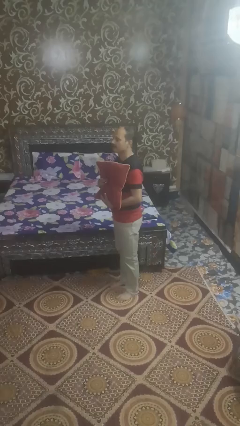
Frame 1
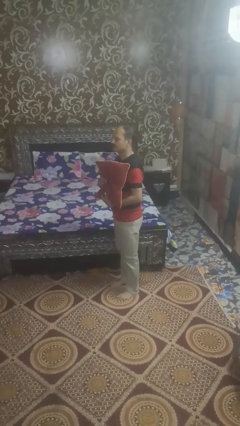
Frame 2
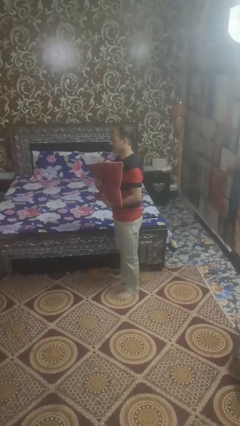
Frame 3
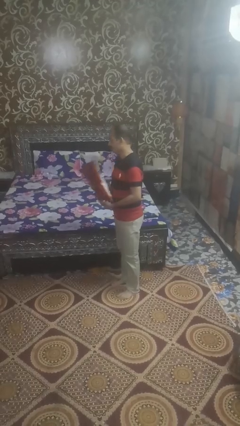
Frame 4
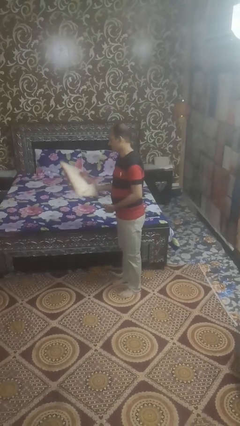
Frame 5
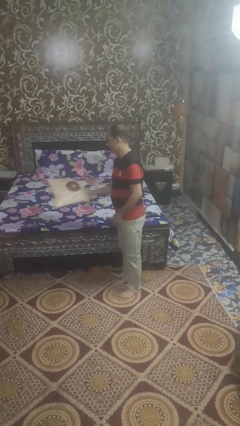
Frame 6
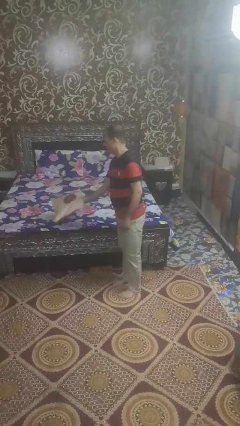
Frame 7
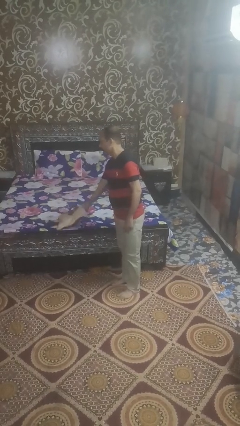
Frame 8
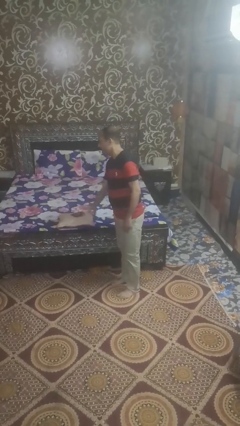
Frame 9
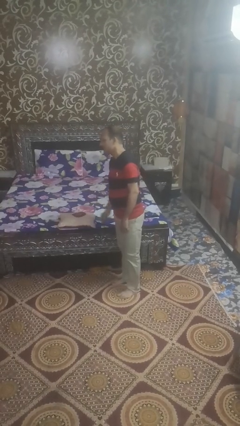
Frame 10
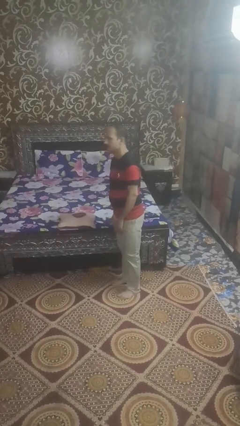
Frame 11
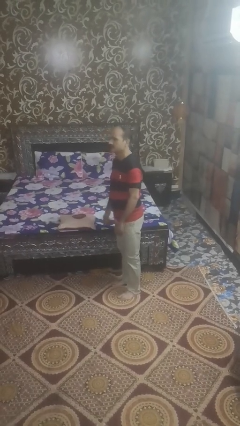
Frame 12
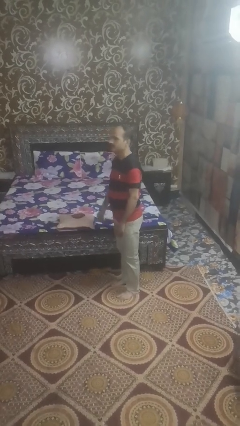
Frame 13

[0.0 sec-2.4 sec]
person puts down object on bed

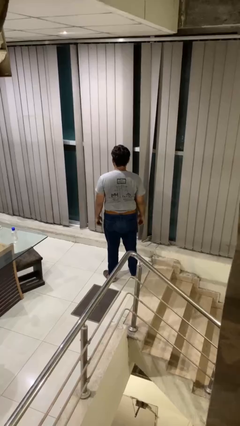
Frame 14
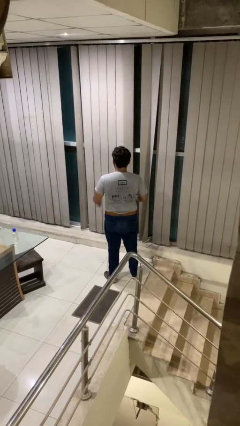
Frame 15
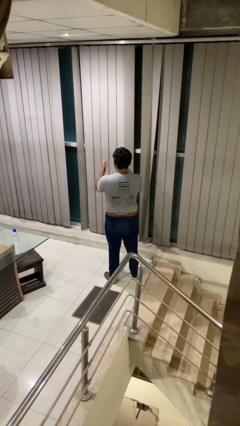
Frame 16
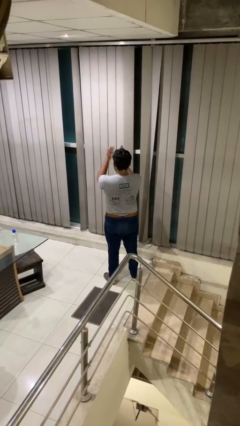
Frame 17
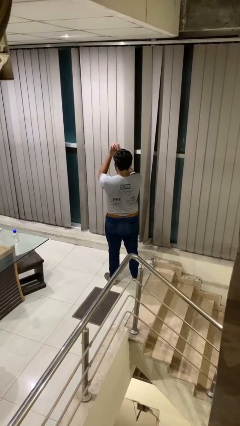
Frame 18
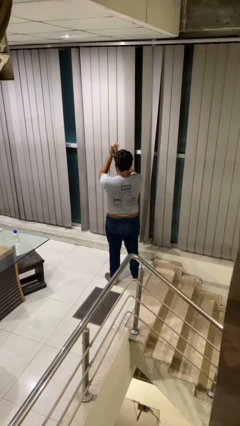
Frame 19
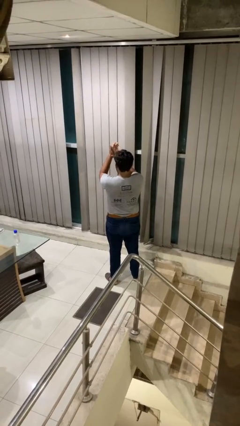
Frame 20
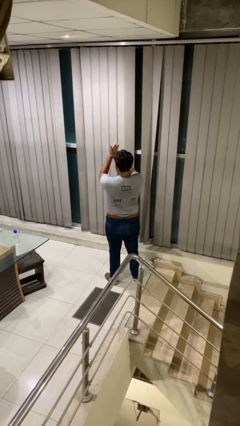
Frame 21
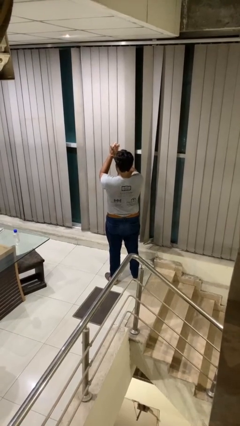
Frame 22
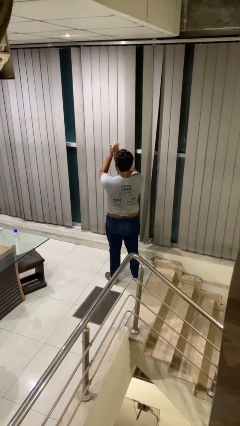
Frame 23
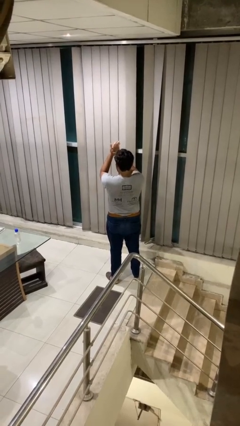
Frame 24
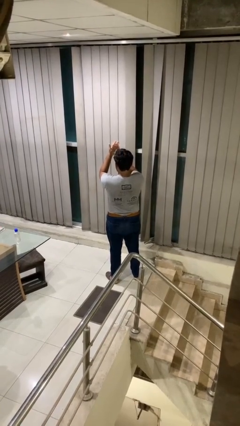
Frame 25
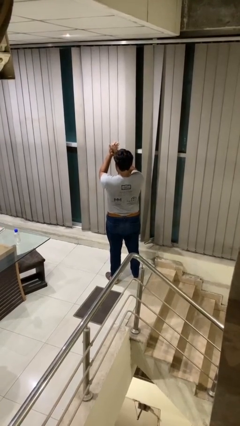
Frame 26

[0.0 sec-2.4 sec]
person claps hands

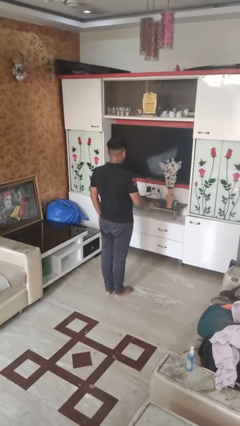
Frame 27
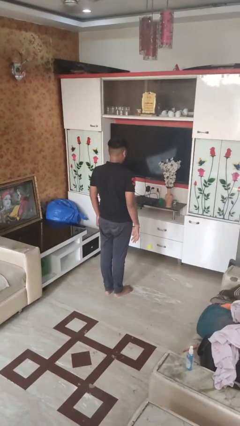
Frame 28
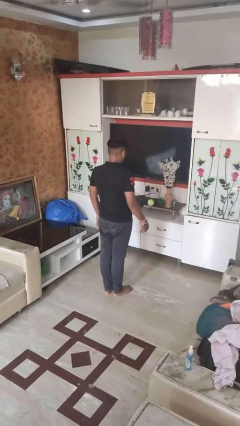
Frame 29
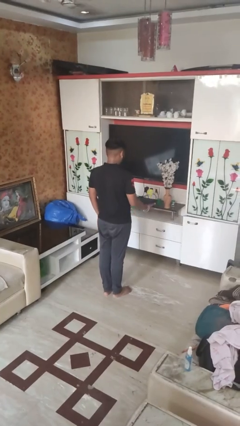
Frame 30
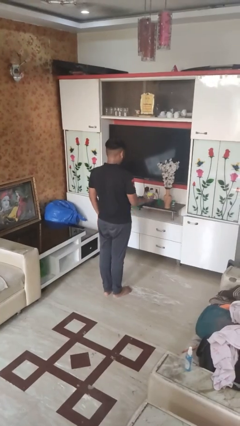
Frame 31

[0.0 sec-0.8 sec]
person bounces ball on floor

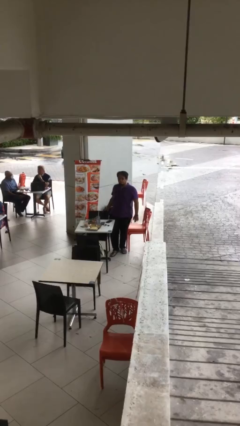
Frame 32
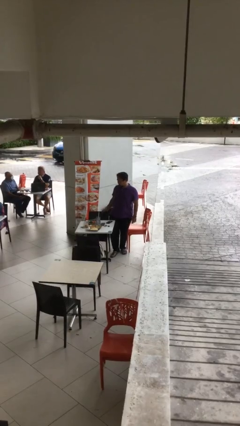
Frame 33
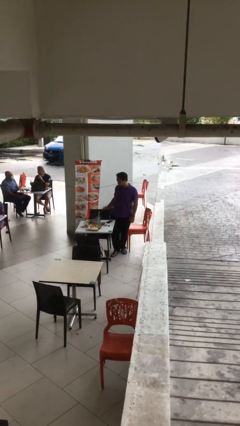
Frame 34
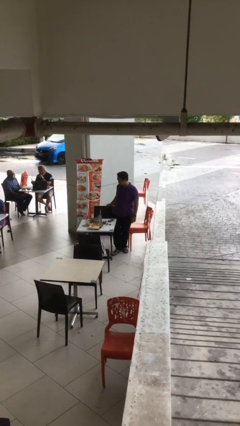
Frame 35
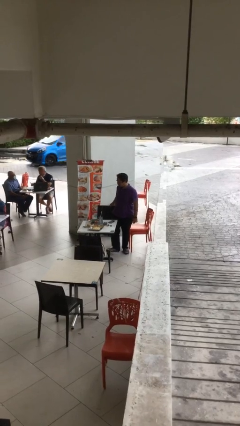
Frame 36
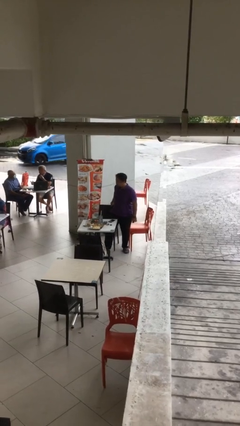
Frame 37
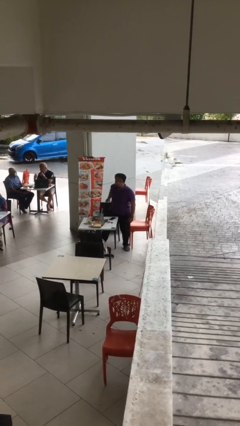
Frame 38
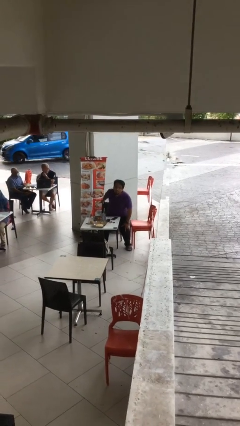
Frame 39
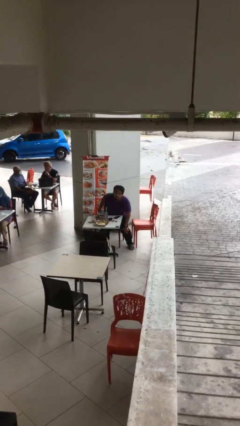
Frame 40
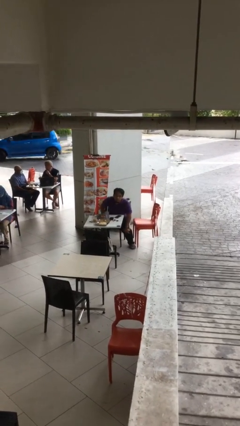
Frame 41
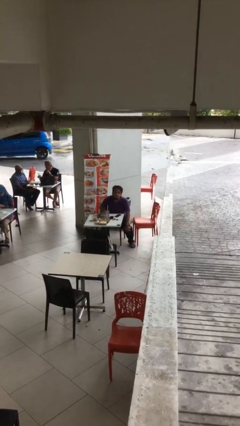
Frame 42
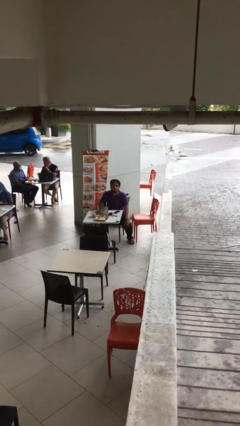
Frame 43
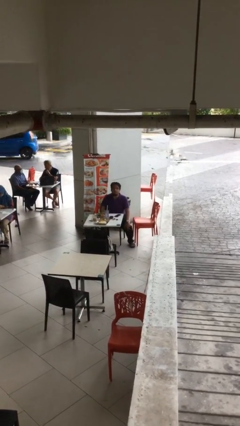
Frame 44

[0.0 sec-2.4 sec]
person sits down

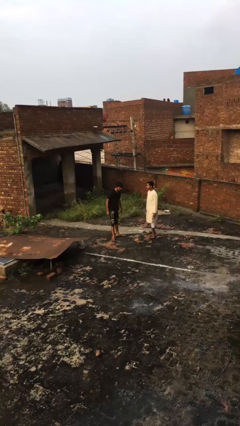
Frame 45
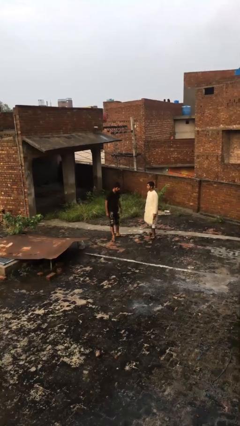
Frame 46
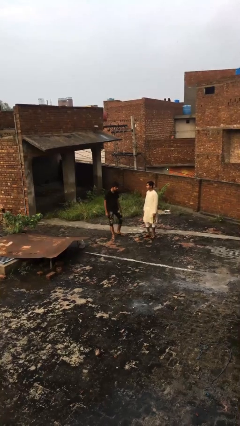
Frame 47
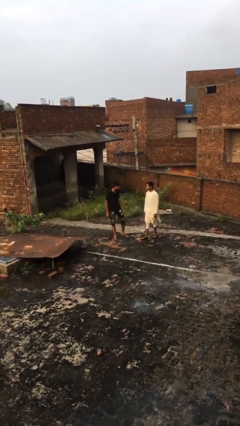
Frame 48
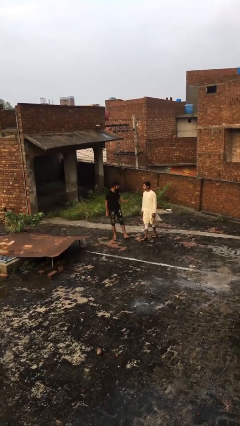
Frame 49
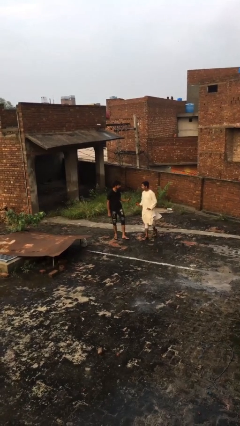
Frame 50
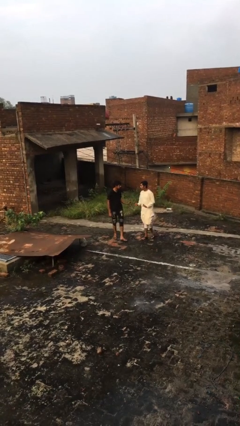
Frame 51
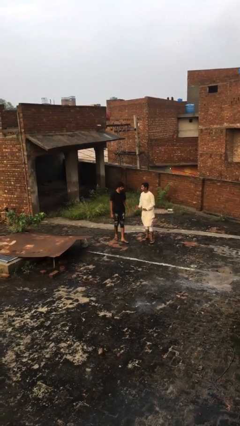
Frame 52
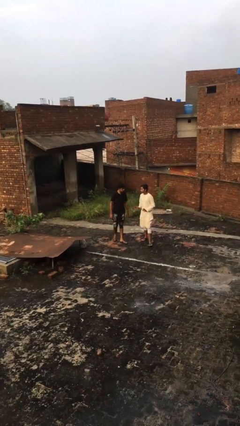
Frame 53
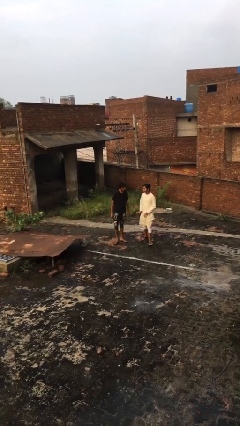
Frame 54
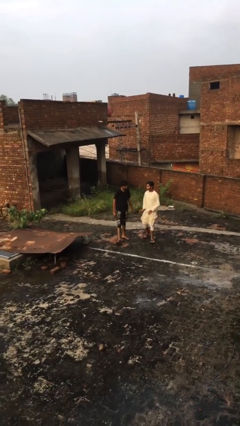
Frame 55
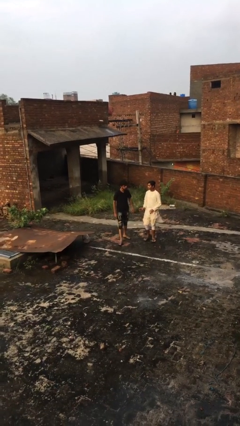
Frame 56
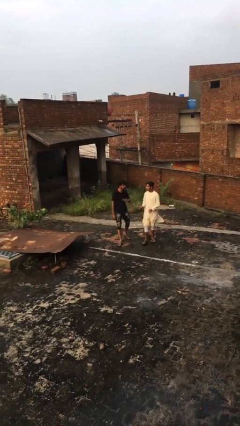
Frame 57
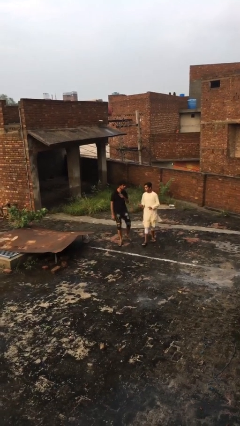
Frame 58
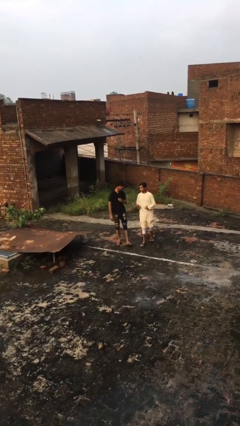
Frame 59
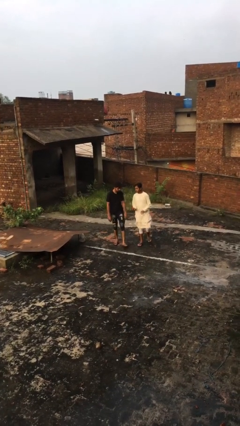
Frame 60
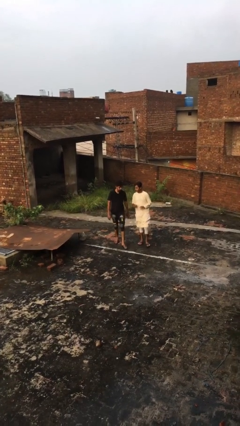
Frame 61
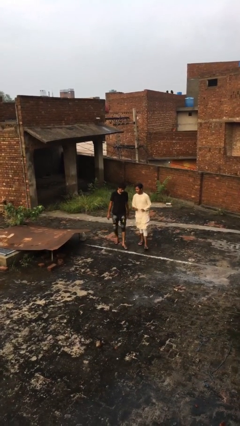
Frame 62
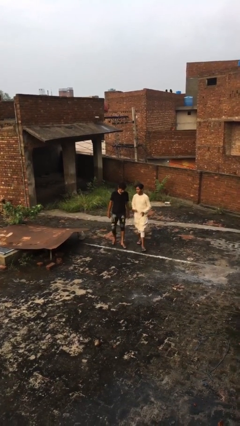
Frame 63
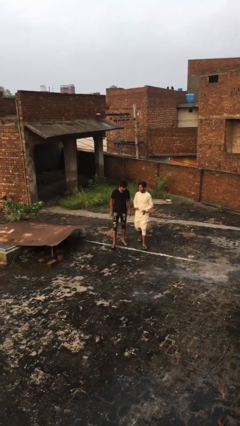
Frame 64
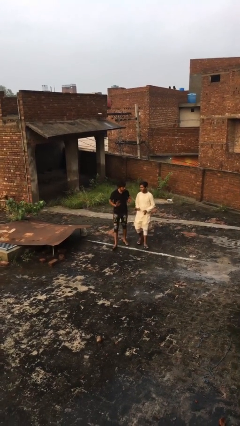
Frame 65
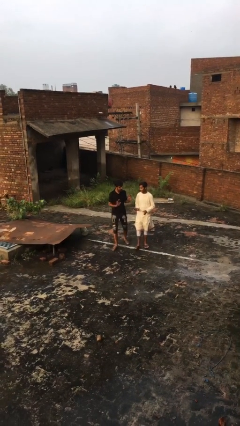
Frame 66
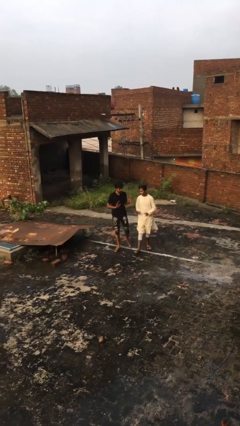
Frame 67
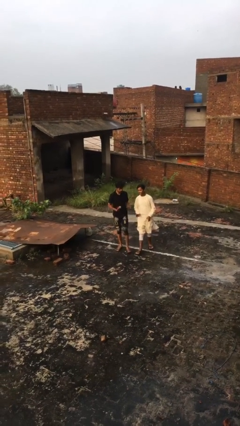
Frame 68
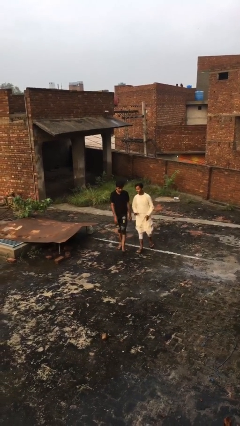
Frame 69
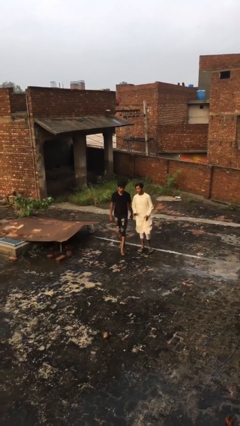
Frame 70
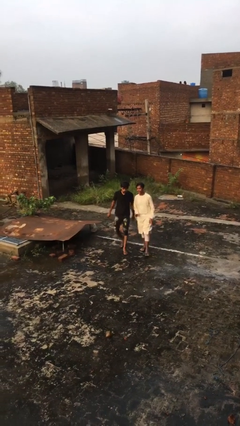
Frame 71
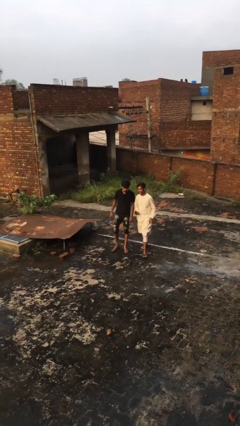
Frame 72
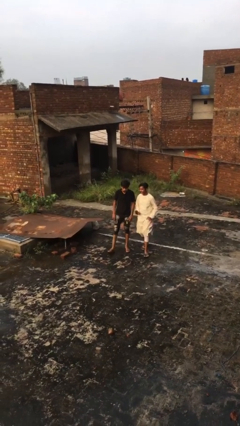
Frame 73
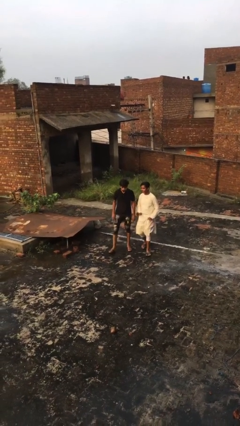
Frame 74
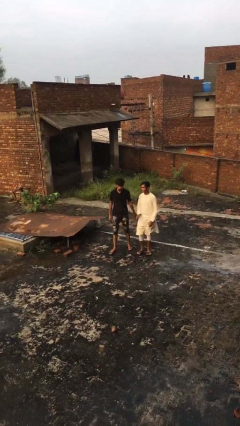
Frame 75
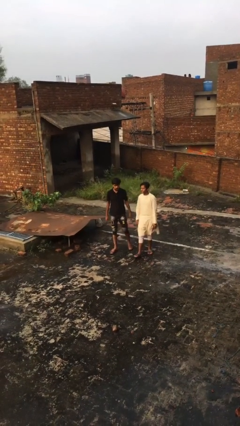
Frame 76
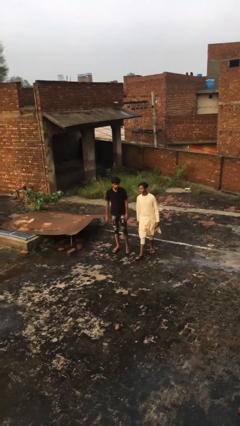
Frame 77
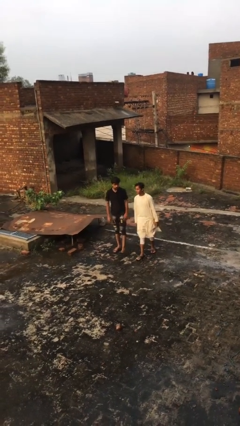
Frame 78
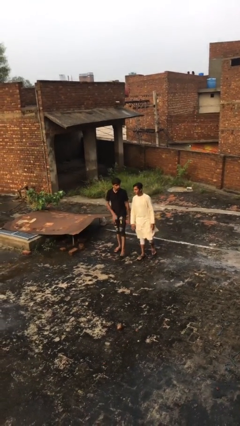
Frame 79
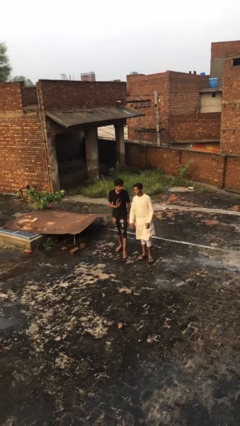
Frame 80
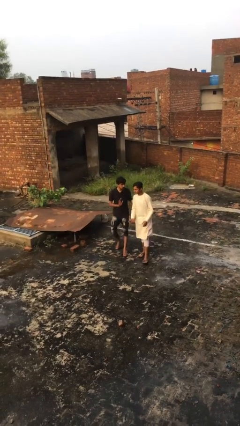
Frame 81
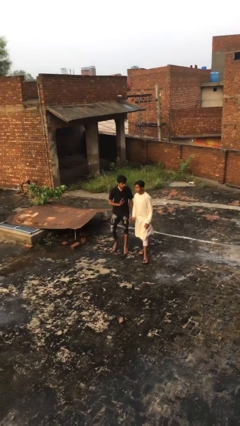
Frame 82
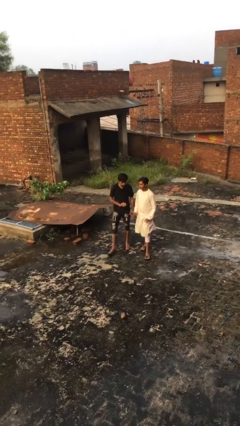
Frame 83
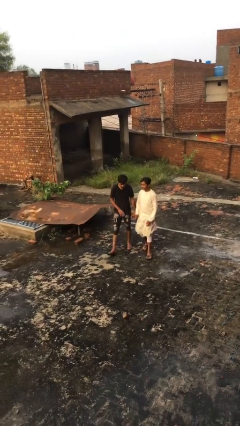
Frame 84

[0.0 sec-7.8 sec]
person talks to person

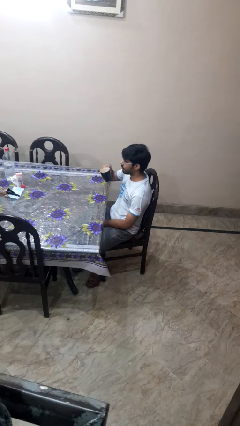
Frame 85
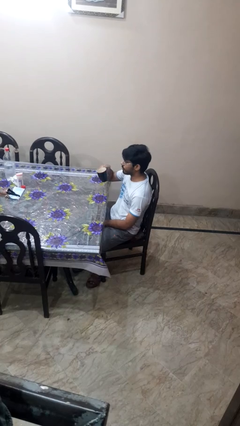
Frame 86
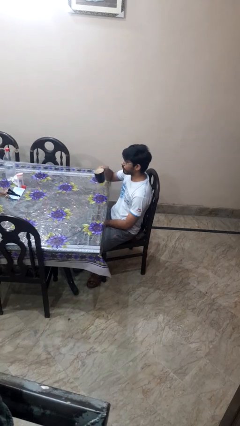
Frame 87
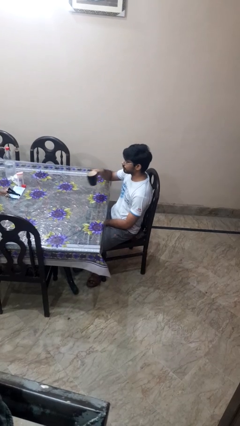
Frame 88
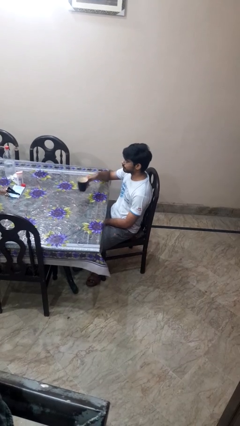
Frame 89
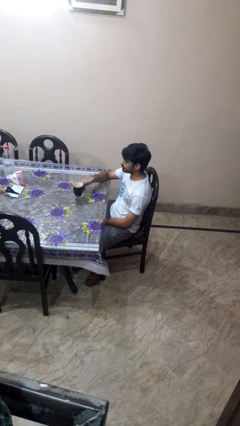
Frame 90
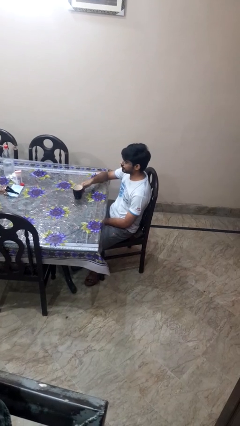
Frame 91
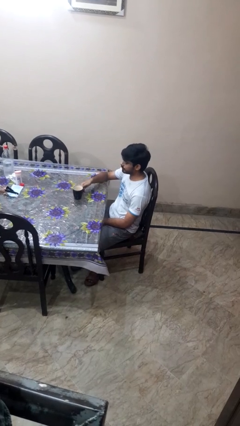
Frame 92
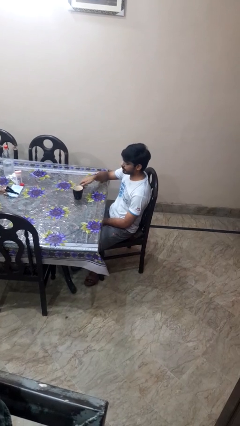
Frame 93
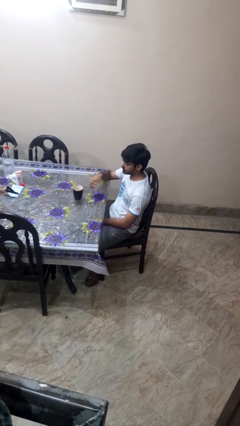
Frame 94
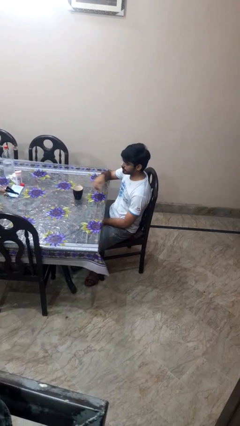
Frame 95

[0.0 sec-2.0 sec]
person puts down object on table
